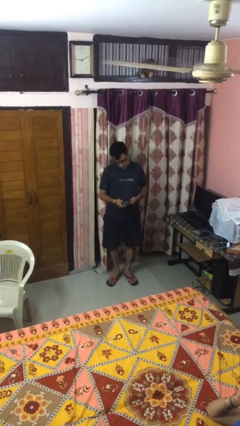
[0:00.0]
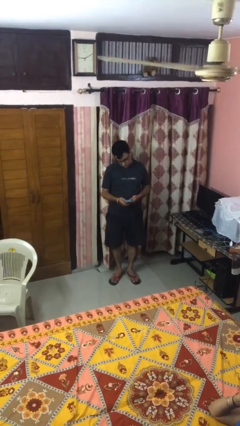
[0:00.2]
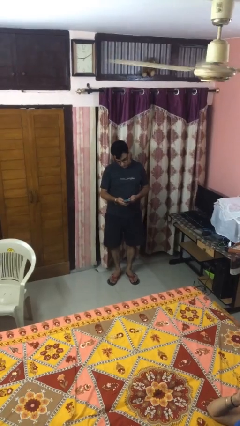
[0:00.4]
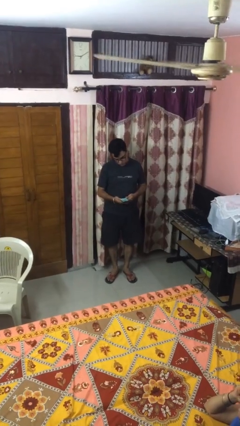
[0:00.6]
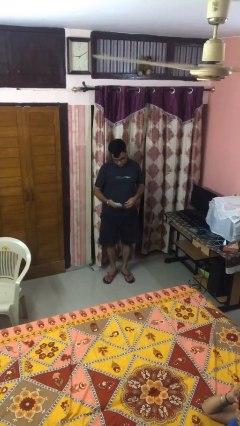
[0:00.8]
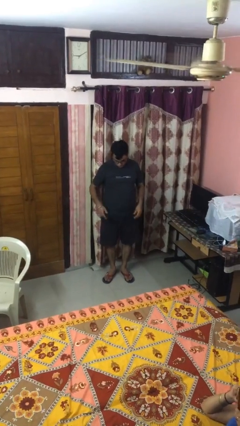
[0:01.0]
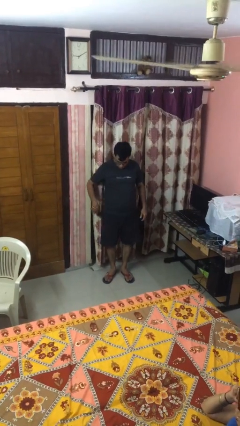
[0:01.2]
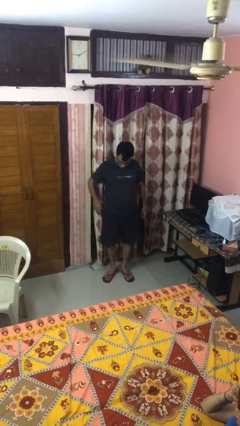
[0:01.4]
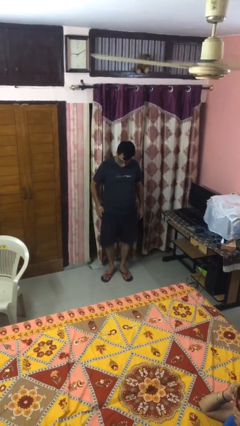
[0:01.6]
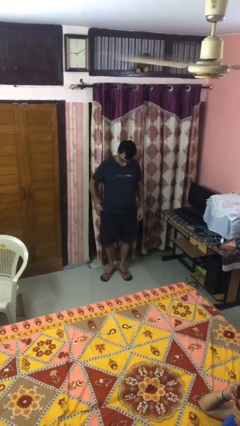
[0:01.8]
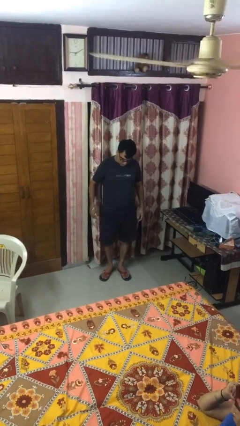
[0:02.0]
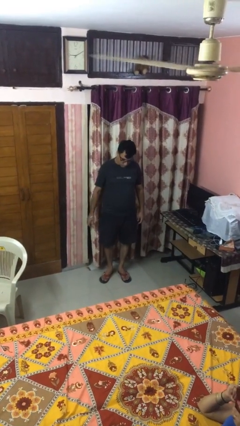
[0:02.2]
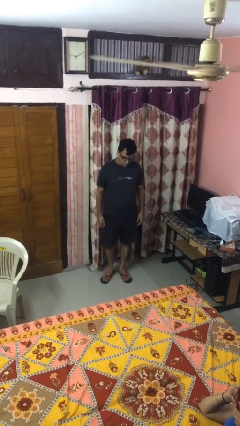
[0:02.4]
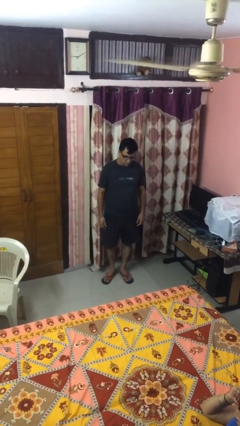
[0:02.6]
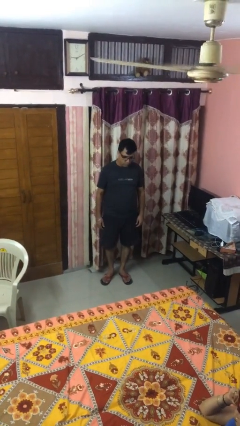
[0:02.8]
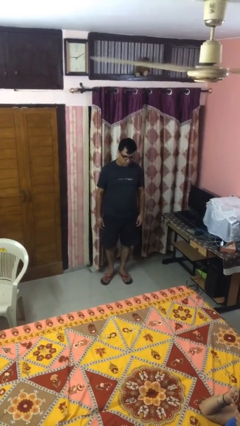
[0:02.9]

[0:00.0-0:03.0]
person puts phone into pocket

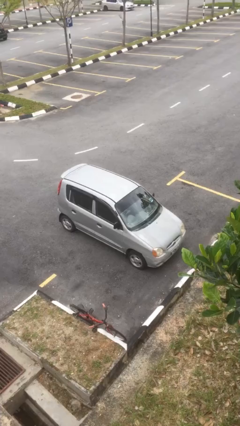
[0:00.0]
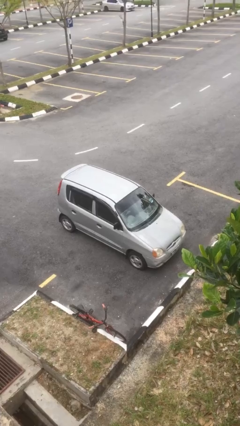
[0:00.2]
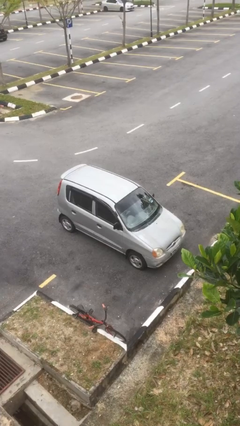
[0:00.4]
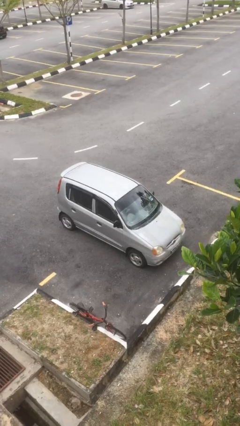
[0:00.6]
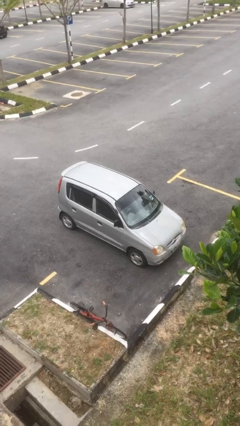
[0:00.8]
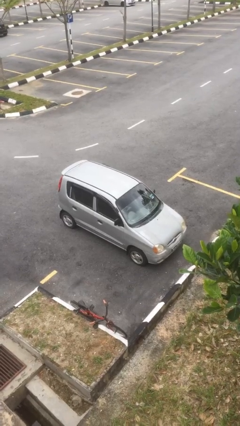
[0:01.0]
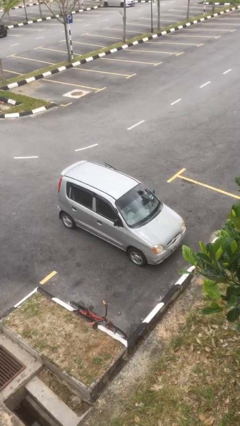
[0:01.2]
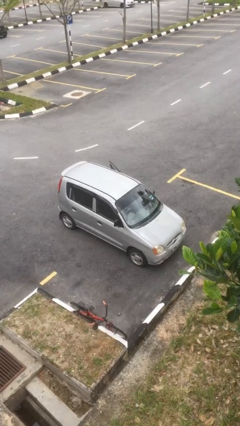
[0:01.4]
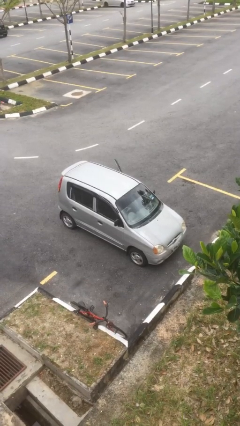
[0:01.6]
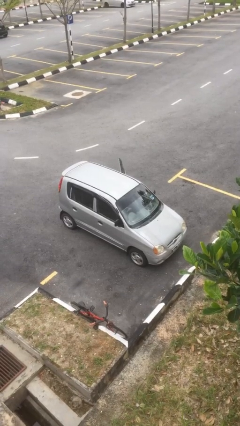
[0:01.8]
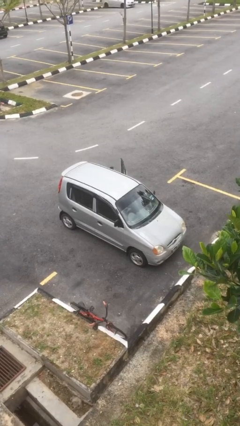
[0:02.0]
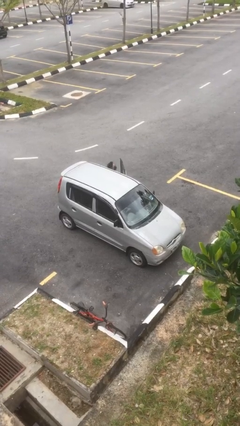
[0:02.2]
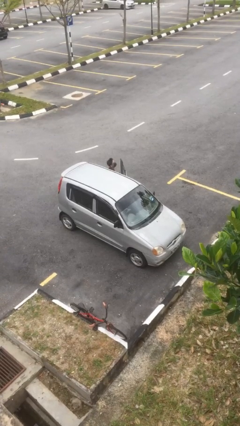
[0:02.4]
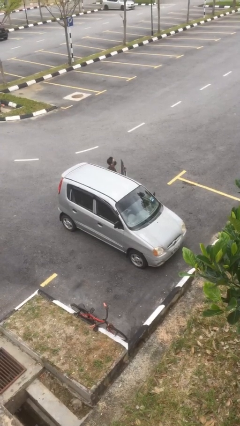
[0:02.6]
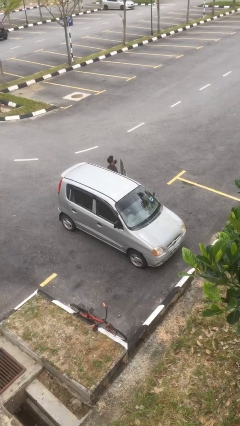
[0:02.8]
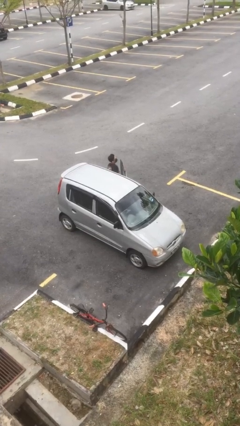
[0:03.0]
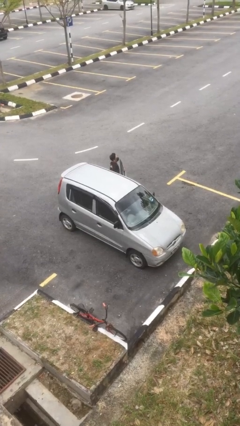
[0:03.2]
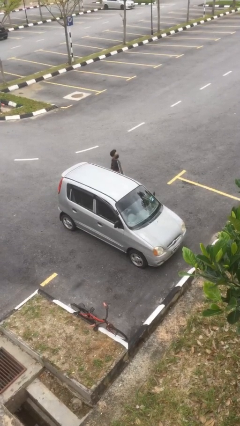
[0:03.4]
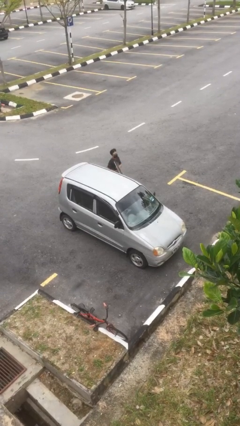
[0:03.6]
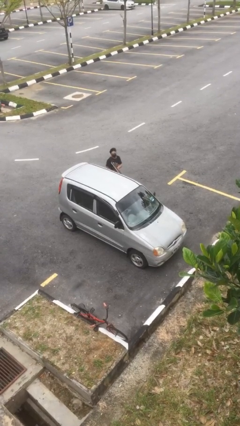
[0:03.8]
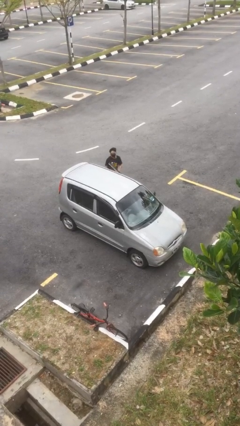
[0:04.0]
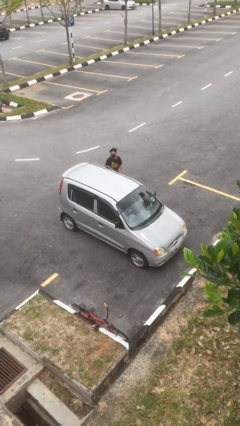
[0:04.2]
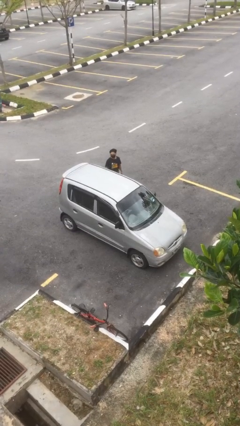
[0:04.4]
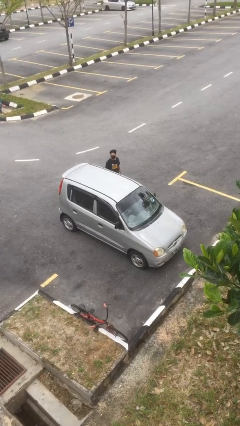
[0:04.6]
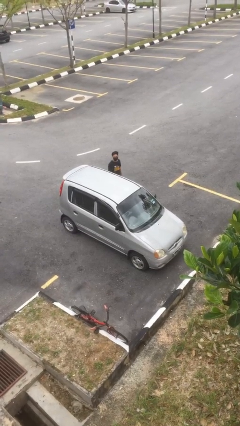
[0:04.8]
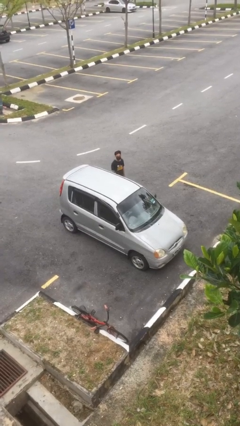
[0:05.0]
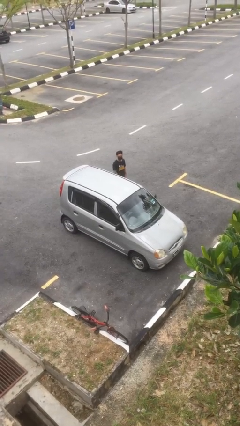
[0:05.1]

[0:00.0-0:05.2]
car drops off person

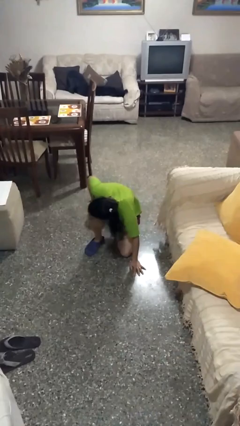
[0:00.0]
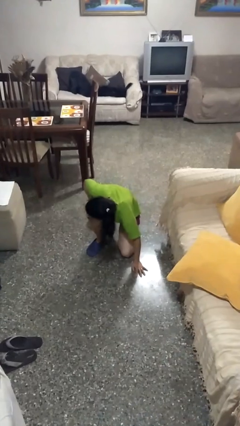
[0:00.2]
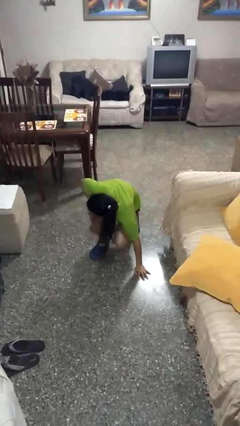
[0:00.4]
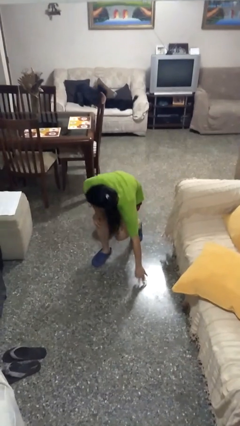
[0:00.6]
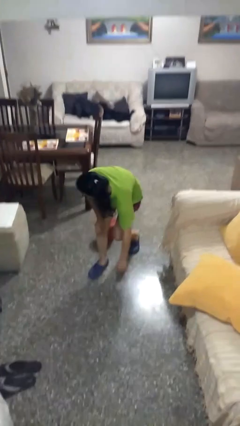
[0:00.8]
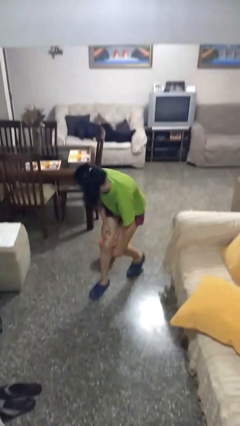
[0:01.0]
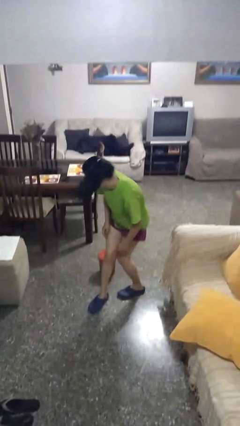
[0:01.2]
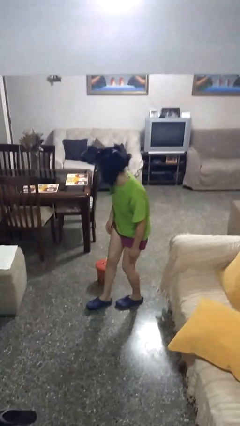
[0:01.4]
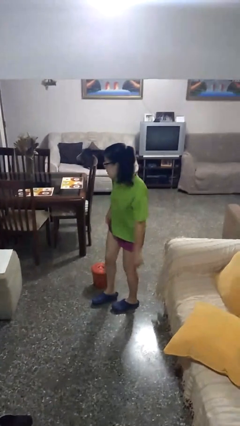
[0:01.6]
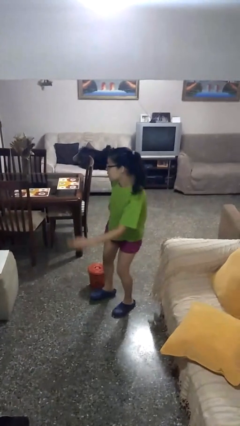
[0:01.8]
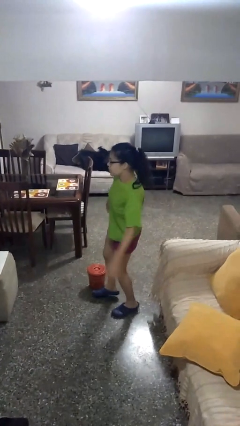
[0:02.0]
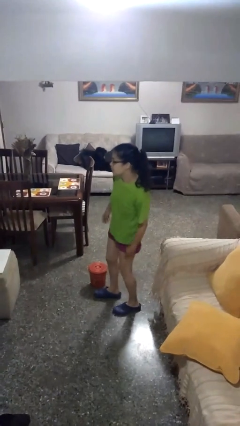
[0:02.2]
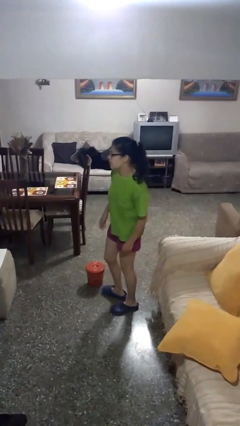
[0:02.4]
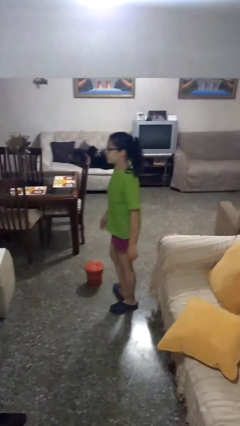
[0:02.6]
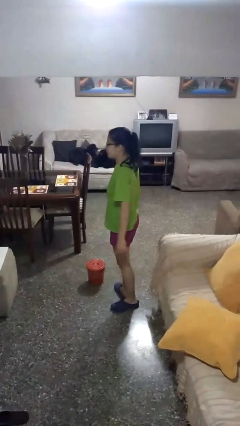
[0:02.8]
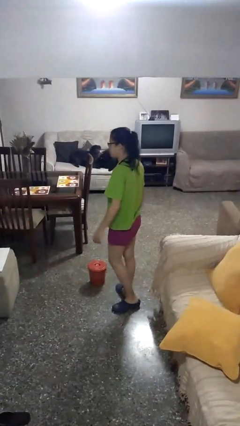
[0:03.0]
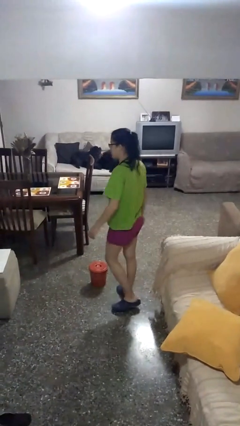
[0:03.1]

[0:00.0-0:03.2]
person stands up from floor

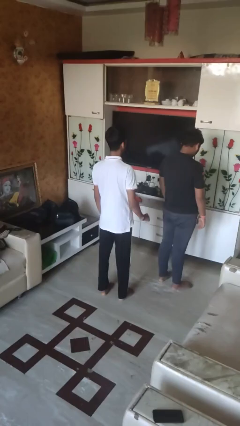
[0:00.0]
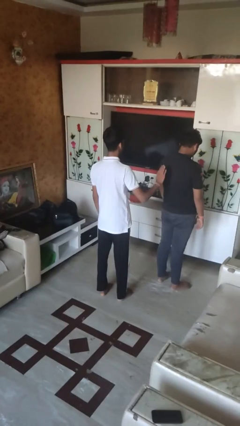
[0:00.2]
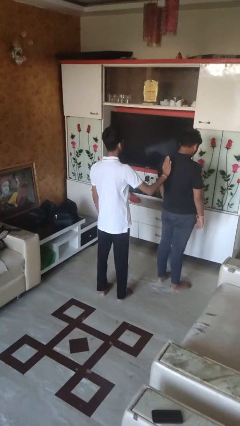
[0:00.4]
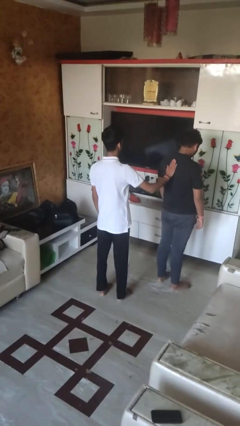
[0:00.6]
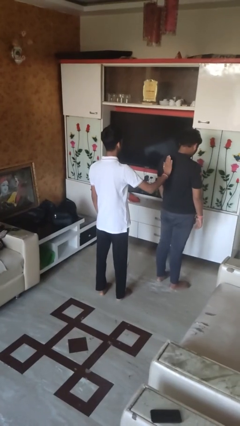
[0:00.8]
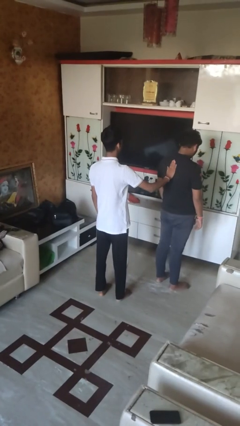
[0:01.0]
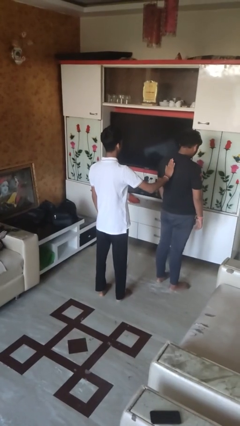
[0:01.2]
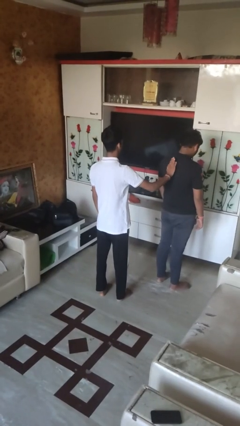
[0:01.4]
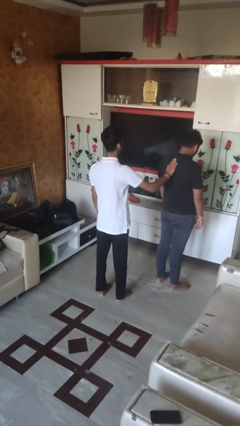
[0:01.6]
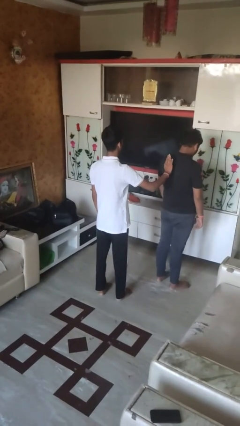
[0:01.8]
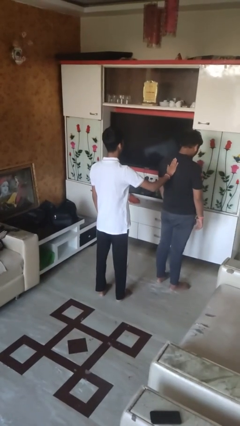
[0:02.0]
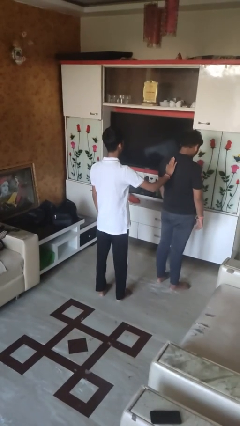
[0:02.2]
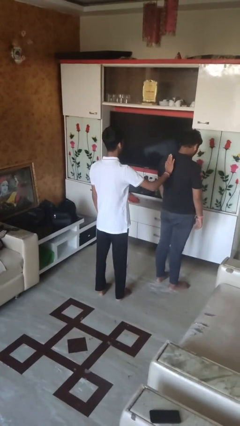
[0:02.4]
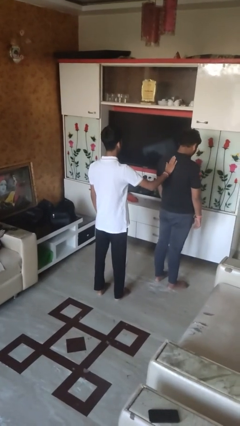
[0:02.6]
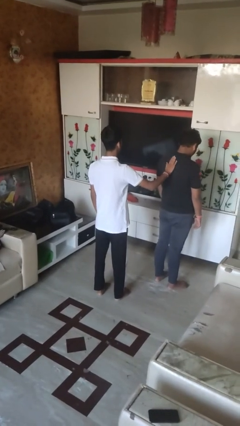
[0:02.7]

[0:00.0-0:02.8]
person touches back of person

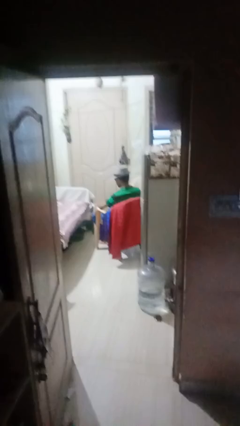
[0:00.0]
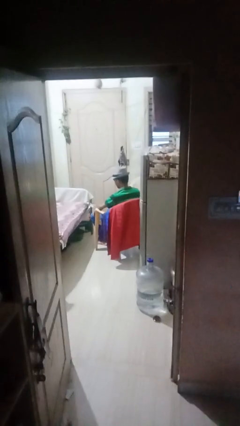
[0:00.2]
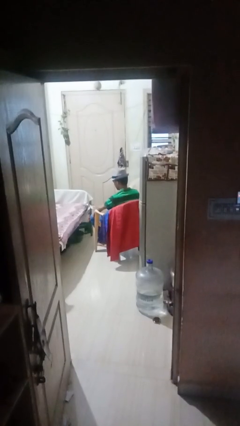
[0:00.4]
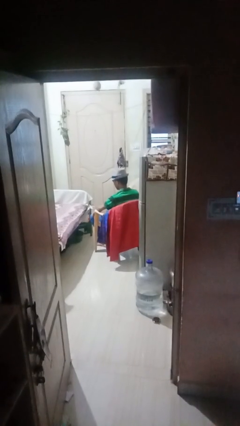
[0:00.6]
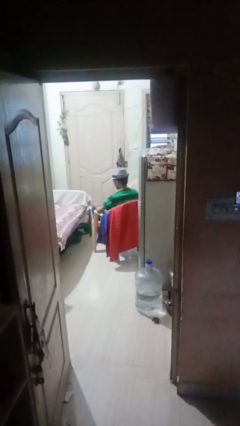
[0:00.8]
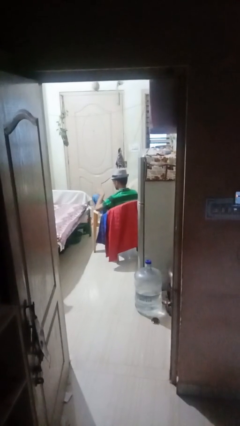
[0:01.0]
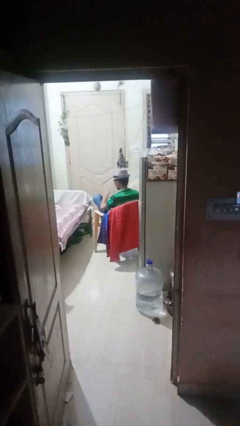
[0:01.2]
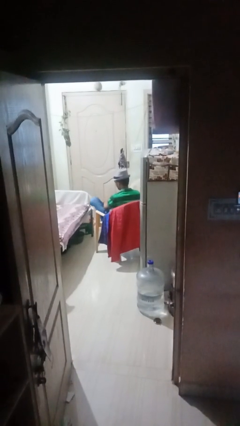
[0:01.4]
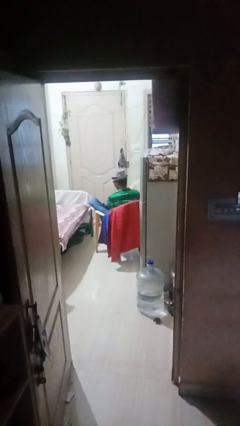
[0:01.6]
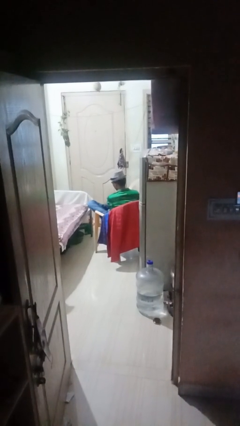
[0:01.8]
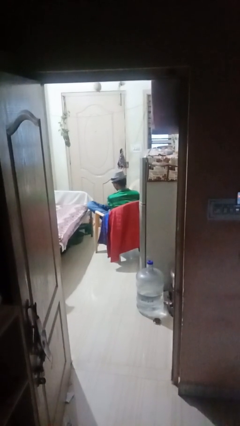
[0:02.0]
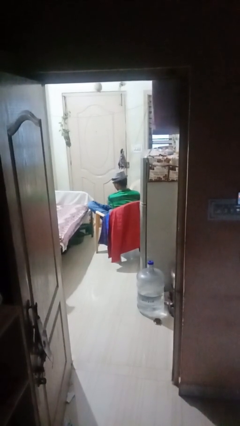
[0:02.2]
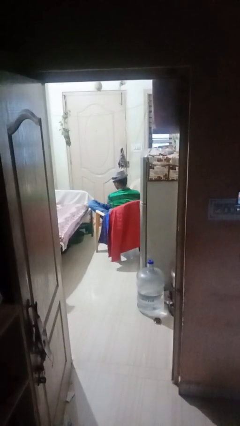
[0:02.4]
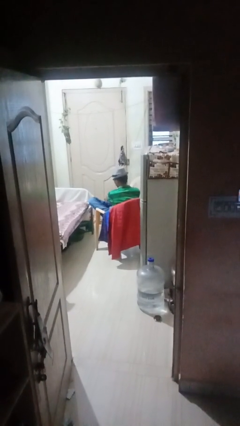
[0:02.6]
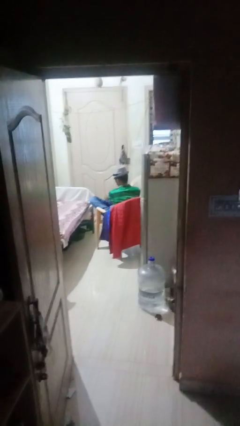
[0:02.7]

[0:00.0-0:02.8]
person rubs foot

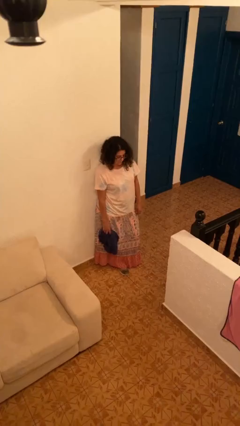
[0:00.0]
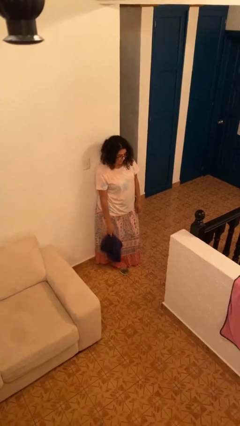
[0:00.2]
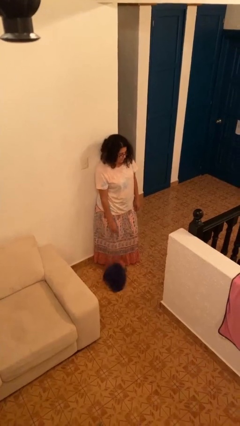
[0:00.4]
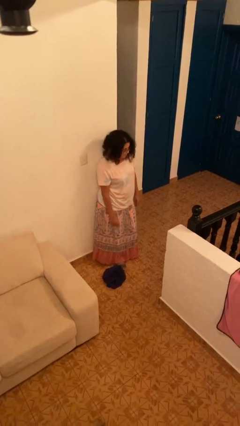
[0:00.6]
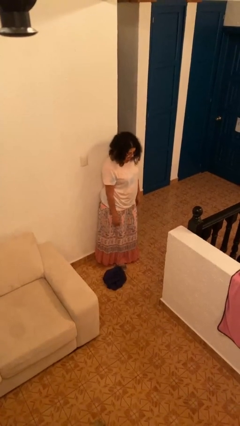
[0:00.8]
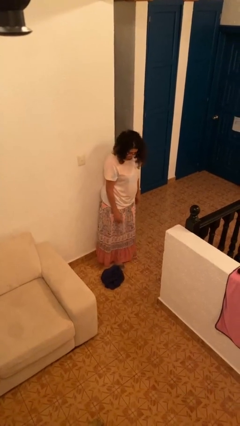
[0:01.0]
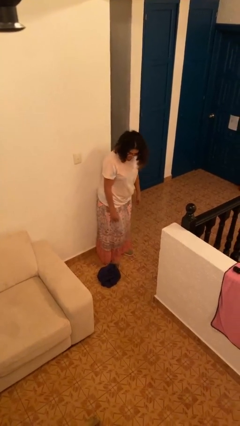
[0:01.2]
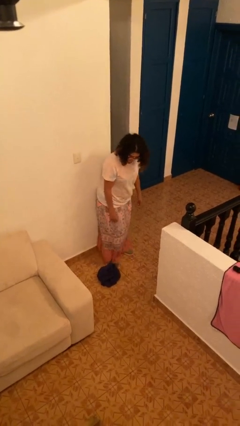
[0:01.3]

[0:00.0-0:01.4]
person drops object
